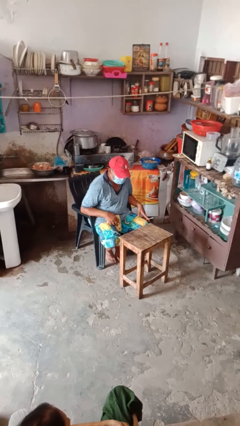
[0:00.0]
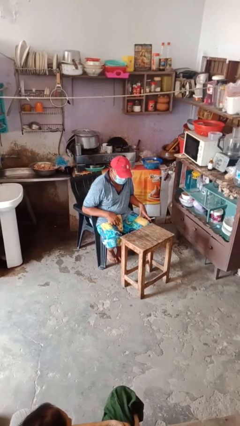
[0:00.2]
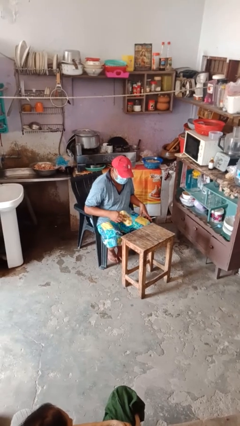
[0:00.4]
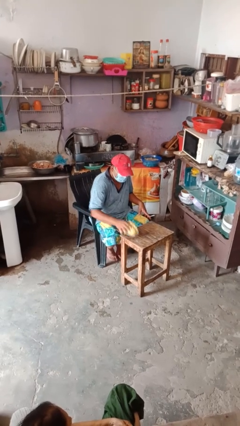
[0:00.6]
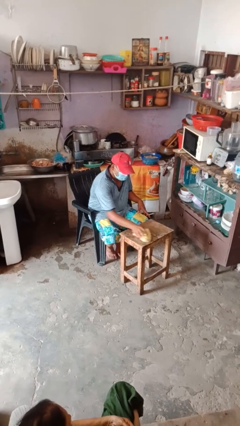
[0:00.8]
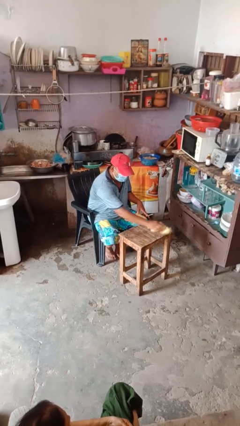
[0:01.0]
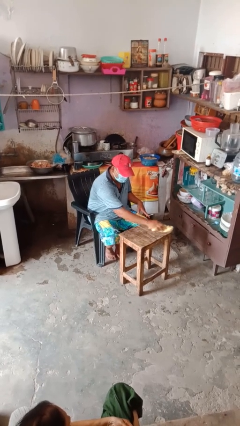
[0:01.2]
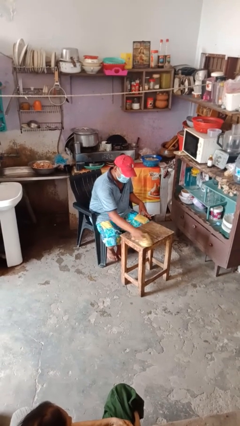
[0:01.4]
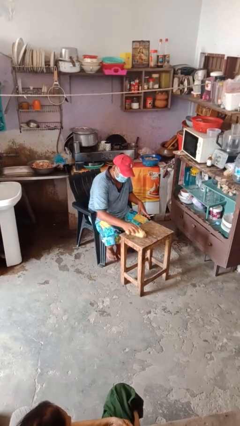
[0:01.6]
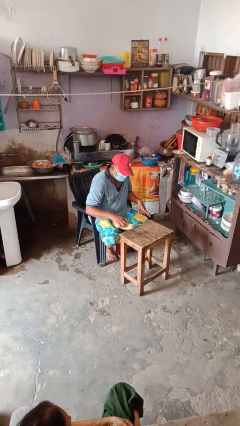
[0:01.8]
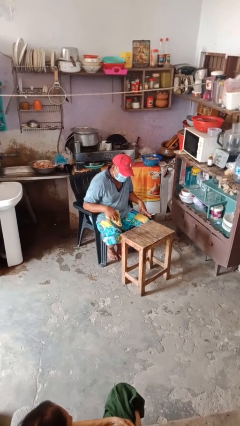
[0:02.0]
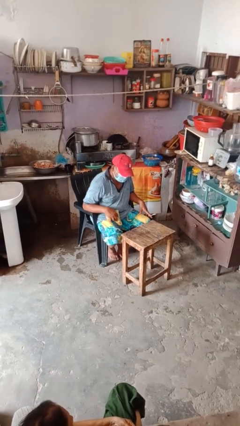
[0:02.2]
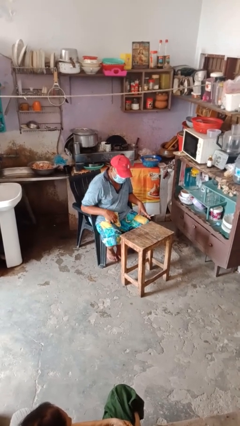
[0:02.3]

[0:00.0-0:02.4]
person cleans table with rag

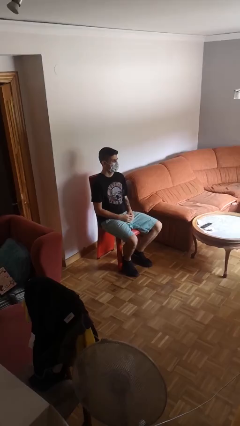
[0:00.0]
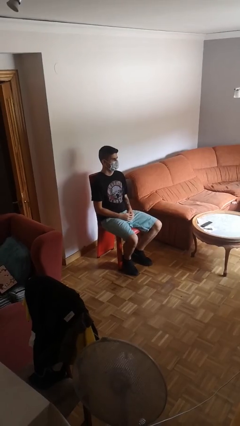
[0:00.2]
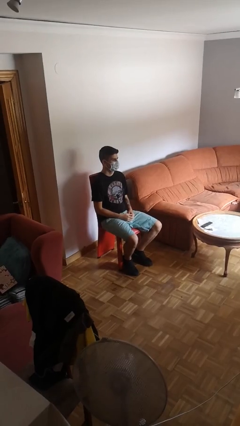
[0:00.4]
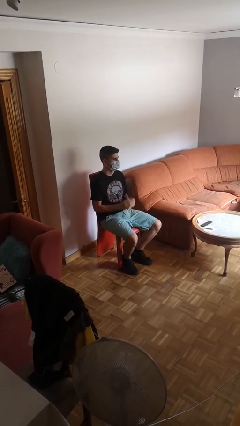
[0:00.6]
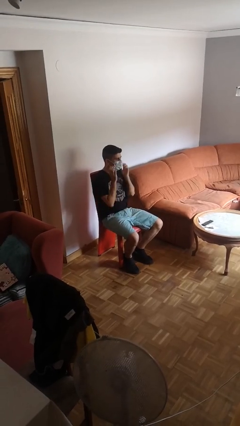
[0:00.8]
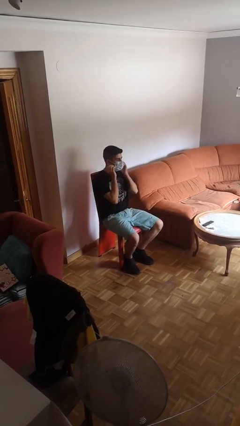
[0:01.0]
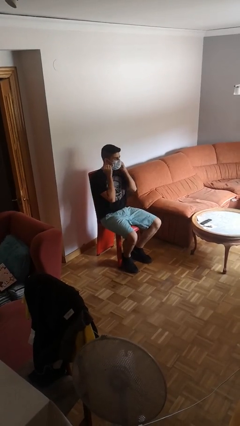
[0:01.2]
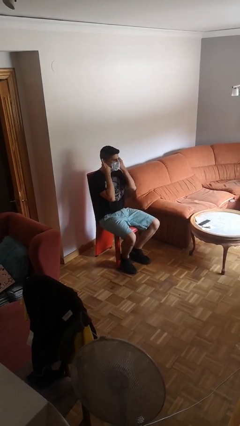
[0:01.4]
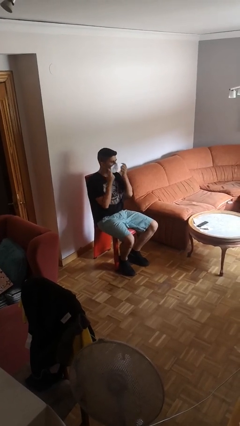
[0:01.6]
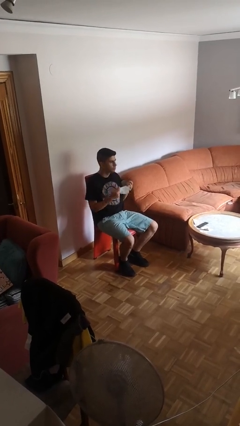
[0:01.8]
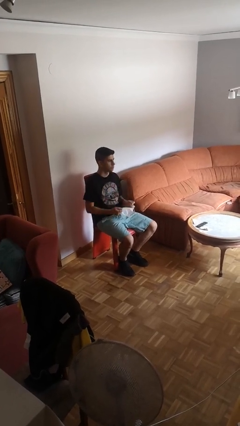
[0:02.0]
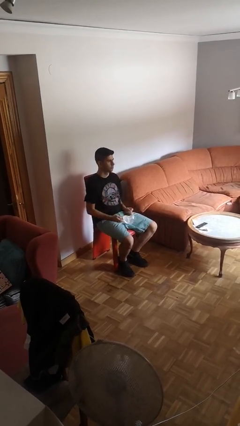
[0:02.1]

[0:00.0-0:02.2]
person takes off facemask

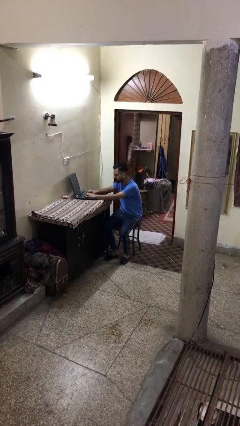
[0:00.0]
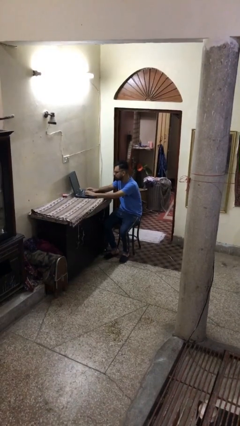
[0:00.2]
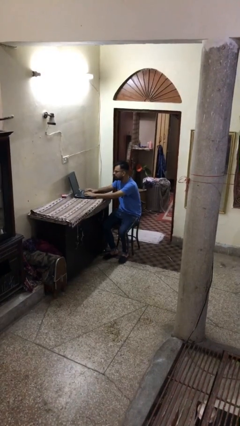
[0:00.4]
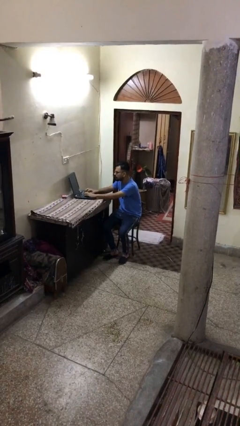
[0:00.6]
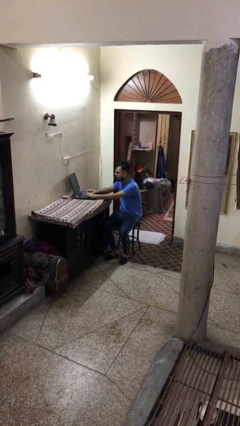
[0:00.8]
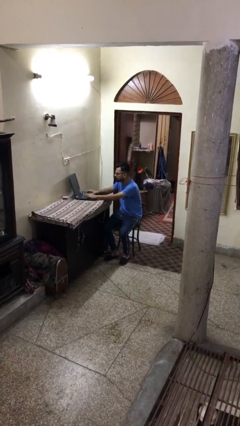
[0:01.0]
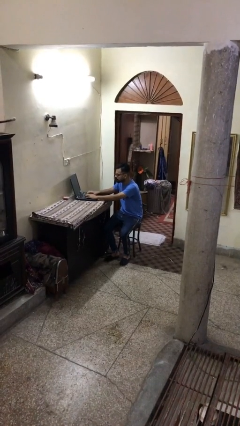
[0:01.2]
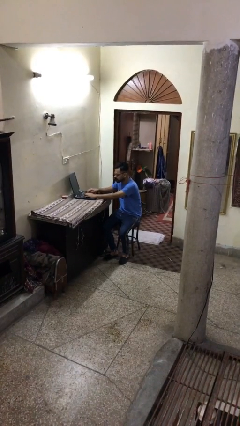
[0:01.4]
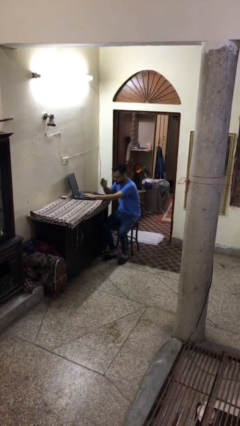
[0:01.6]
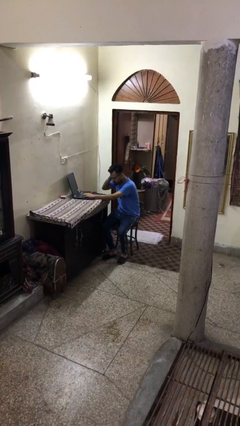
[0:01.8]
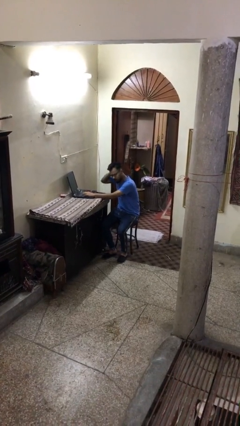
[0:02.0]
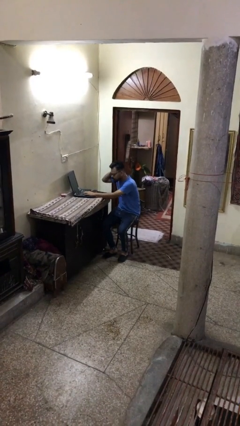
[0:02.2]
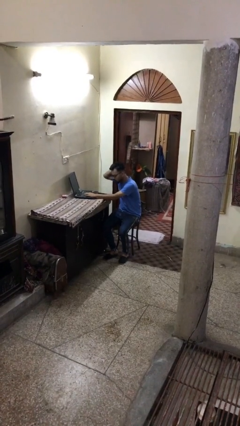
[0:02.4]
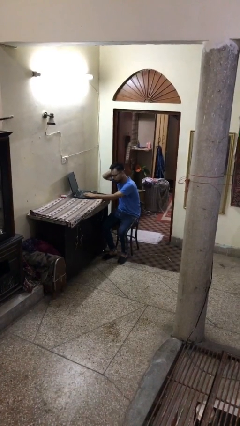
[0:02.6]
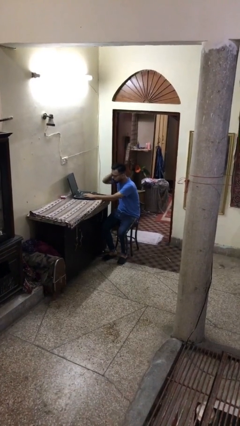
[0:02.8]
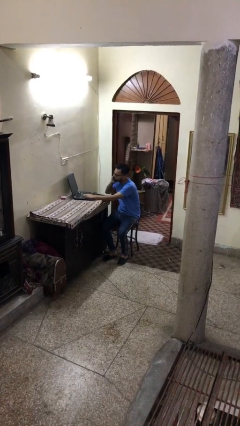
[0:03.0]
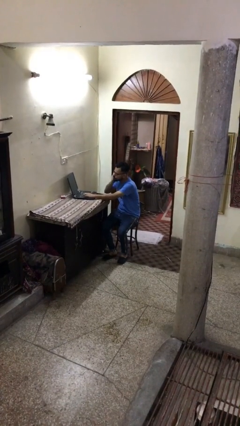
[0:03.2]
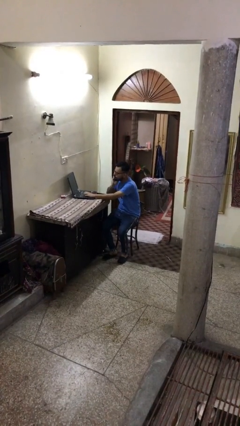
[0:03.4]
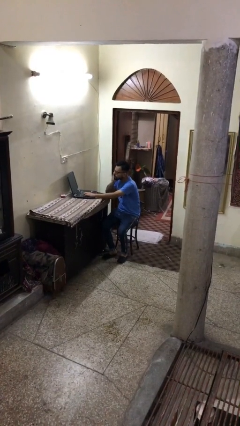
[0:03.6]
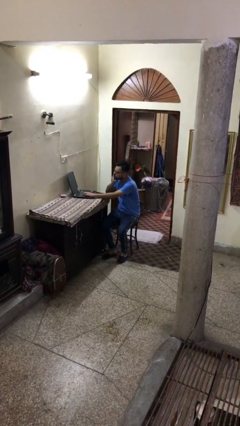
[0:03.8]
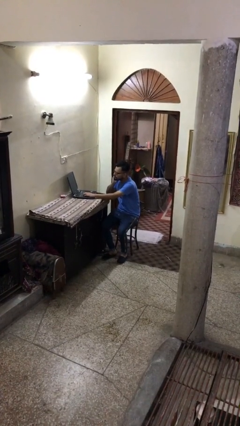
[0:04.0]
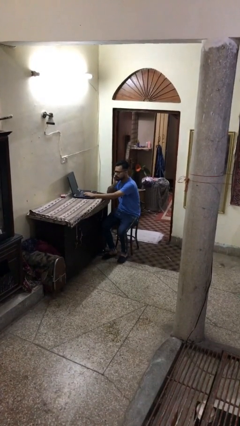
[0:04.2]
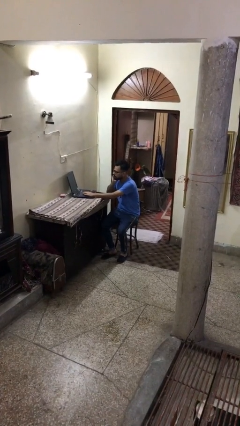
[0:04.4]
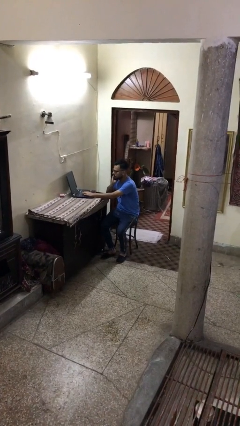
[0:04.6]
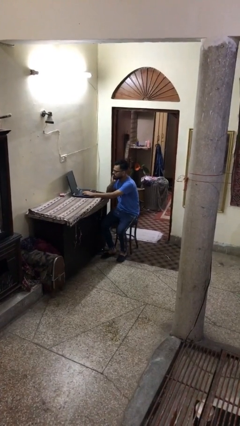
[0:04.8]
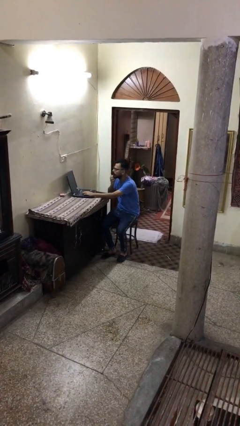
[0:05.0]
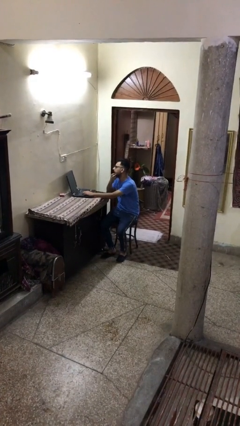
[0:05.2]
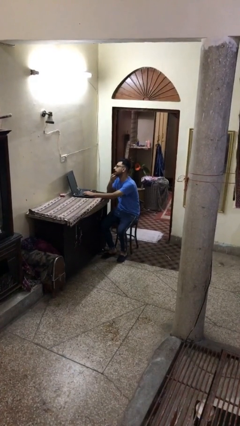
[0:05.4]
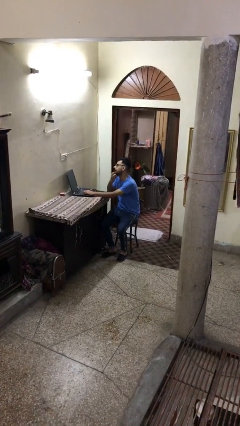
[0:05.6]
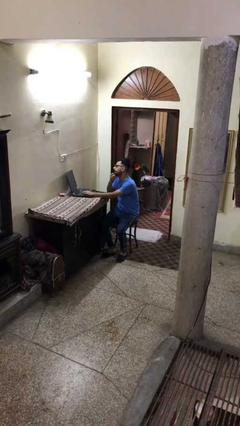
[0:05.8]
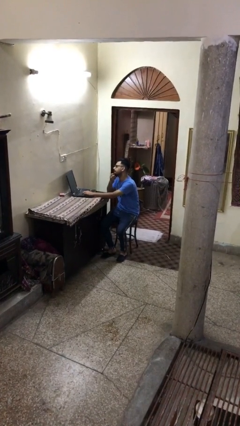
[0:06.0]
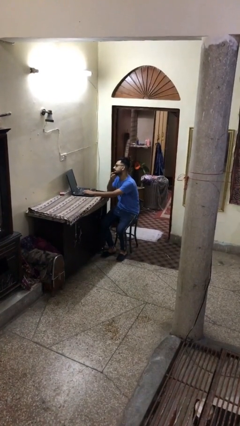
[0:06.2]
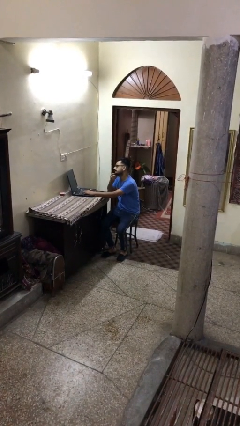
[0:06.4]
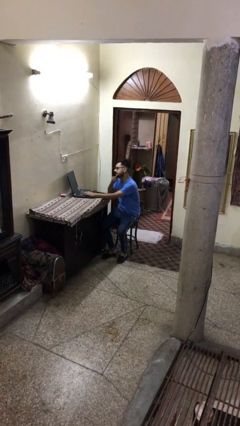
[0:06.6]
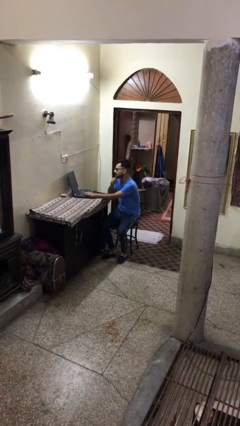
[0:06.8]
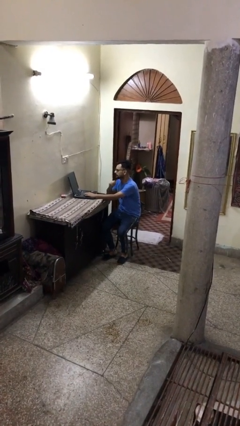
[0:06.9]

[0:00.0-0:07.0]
person interacts with laptop

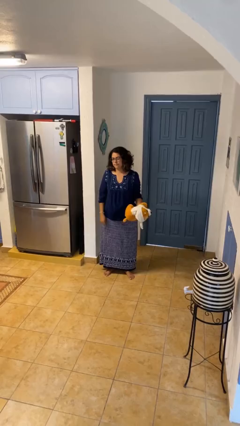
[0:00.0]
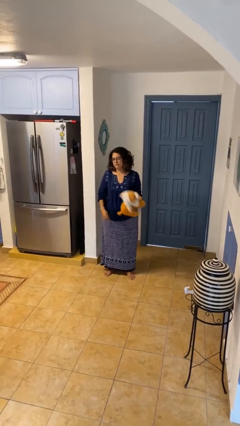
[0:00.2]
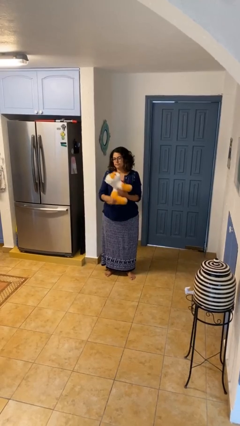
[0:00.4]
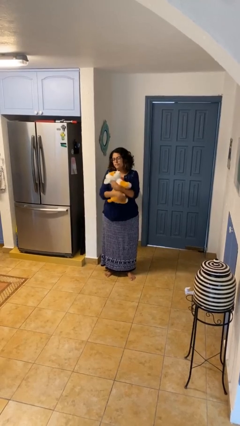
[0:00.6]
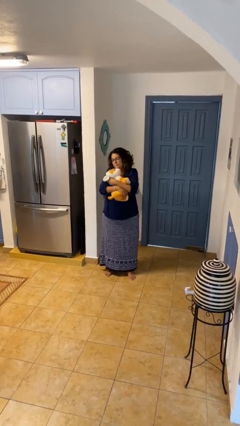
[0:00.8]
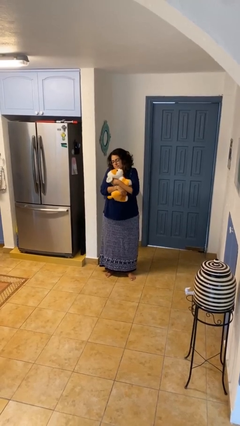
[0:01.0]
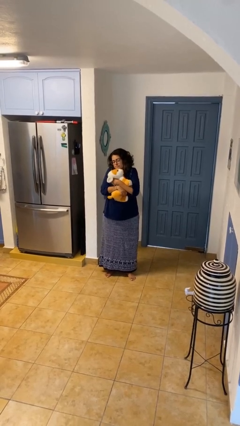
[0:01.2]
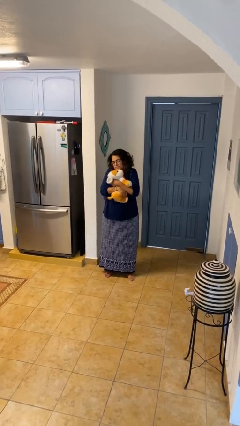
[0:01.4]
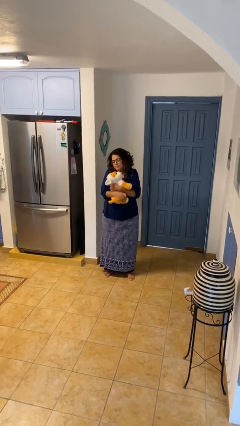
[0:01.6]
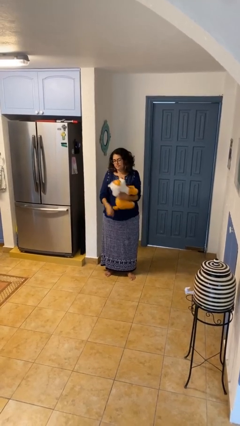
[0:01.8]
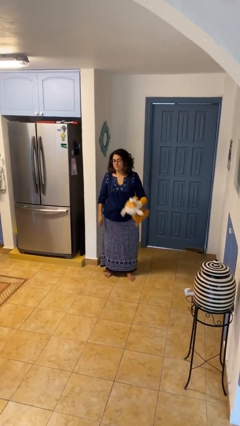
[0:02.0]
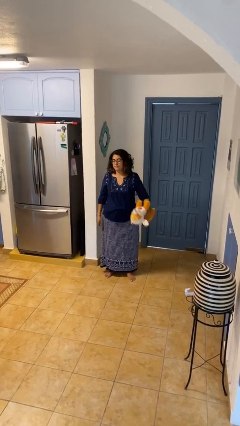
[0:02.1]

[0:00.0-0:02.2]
person hugs stuffed animal

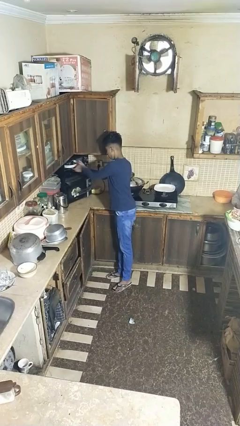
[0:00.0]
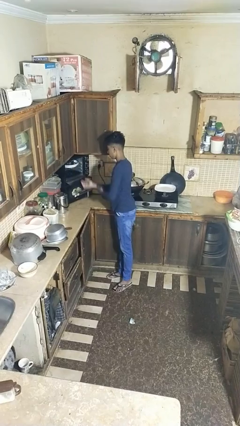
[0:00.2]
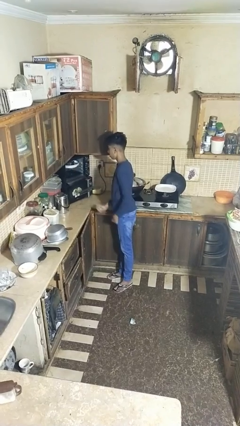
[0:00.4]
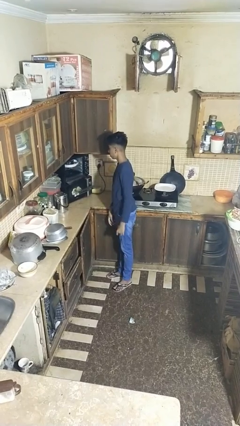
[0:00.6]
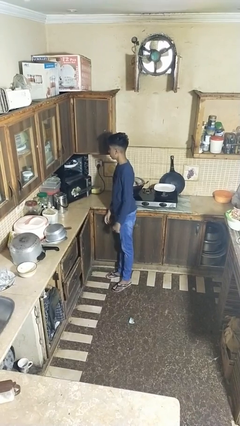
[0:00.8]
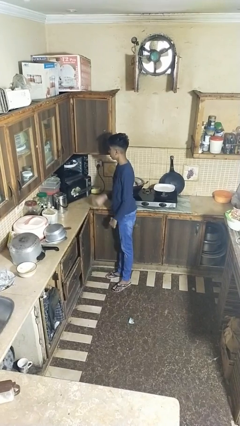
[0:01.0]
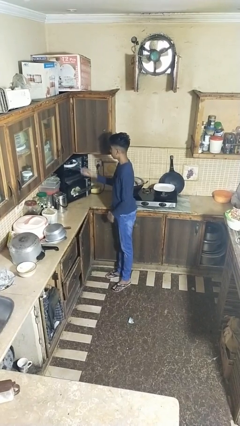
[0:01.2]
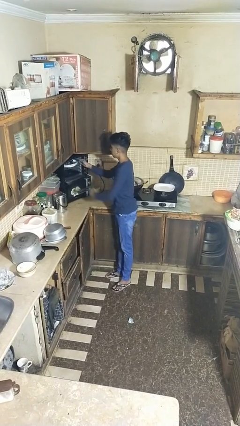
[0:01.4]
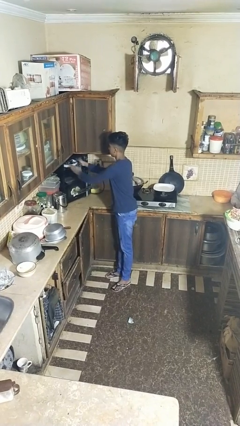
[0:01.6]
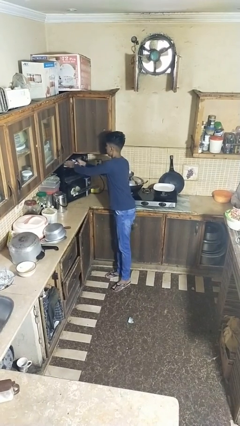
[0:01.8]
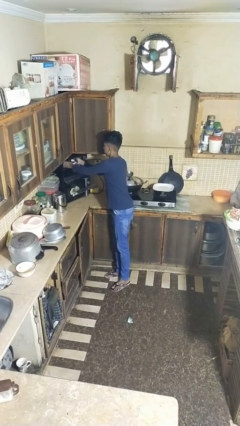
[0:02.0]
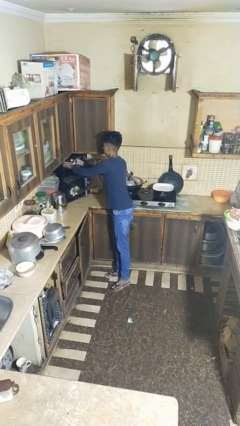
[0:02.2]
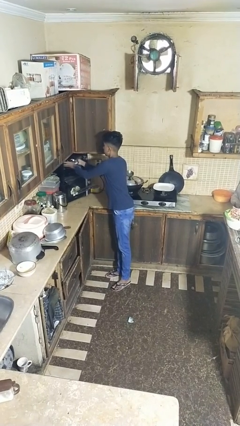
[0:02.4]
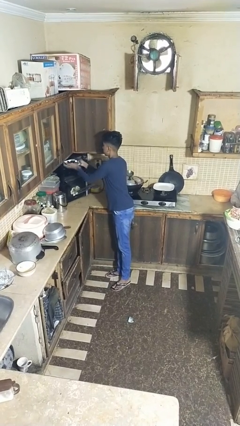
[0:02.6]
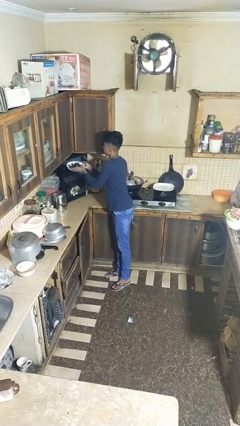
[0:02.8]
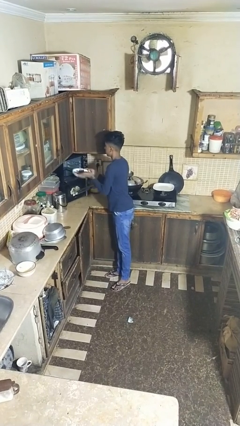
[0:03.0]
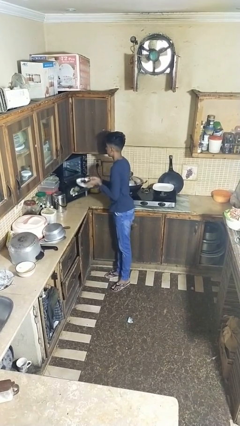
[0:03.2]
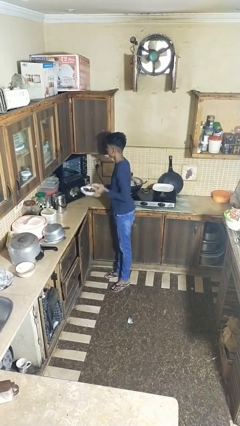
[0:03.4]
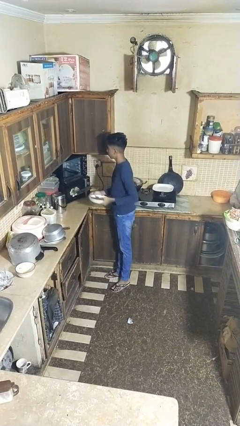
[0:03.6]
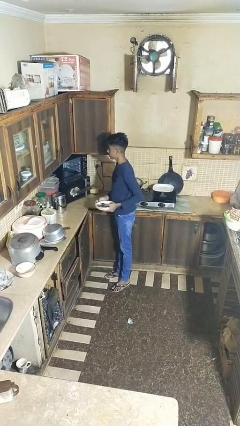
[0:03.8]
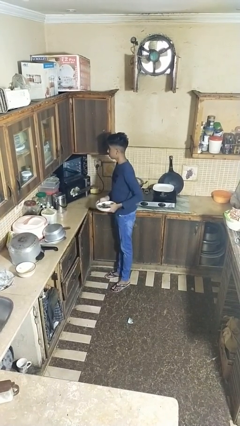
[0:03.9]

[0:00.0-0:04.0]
person unloads dishwasher
